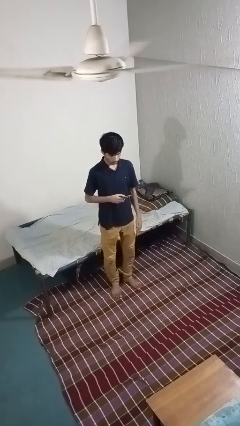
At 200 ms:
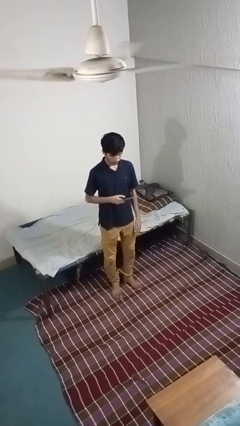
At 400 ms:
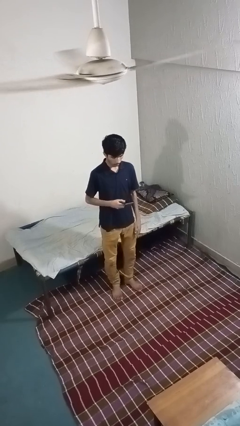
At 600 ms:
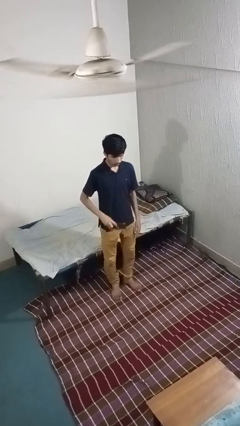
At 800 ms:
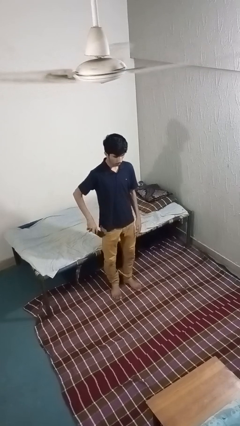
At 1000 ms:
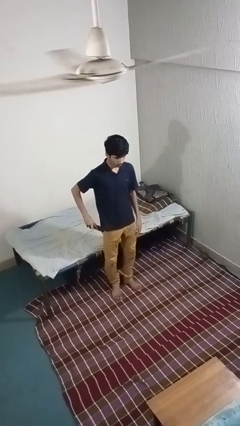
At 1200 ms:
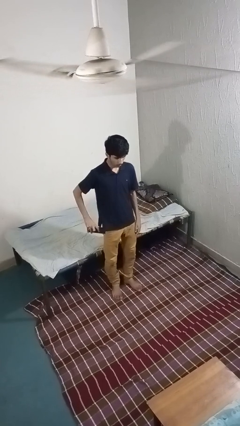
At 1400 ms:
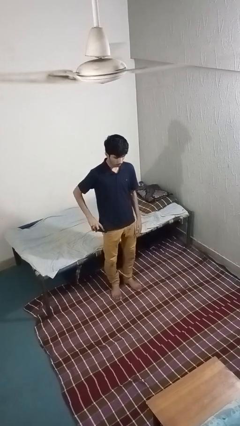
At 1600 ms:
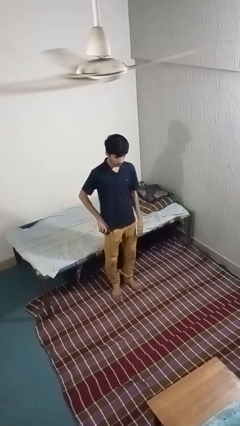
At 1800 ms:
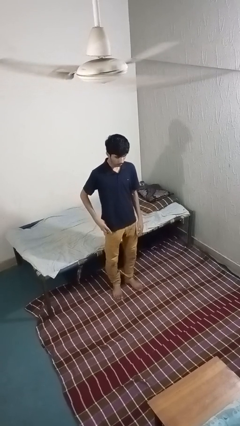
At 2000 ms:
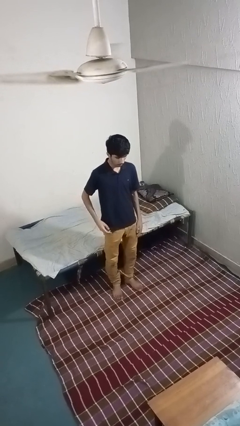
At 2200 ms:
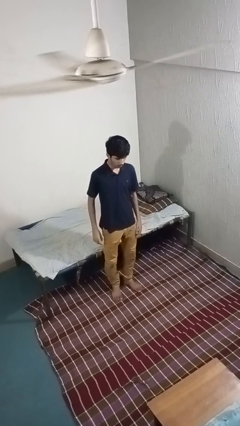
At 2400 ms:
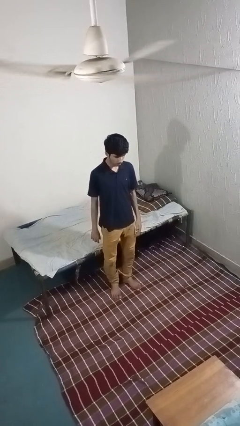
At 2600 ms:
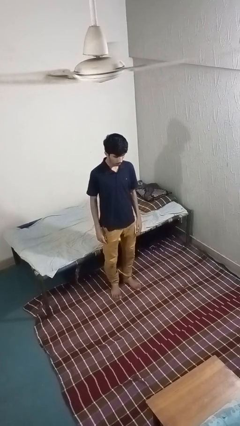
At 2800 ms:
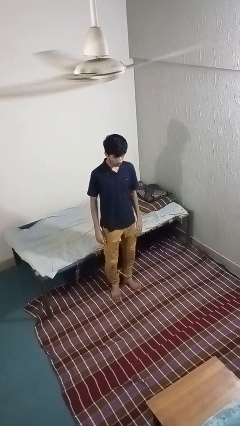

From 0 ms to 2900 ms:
person puts phone into pocket

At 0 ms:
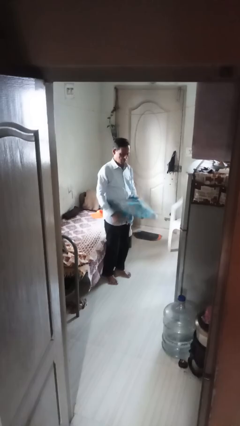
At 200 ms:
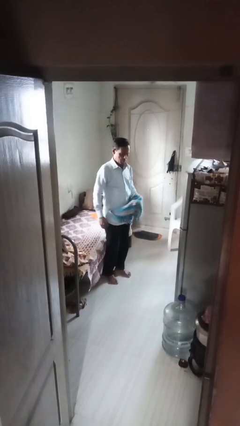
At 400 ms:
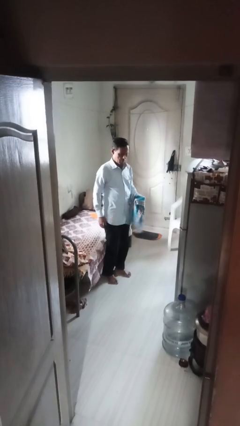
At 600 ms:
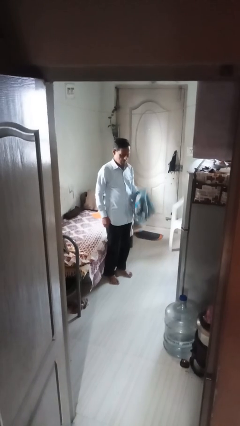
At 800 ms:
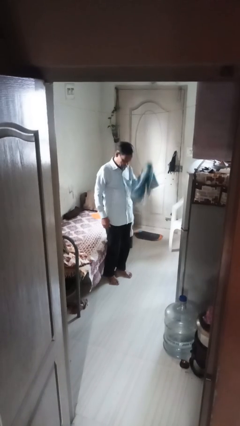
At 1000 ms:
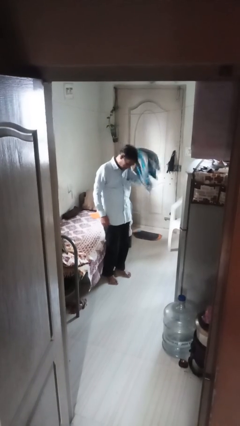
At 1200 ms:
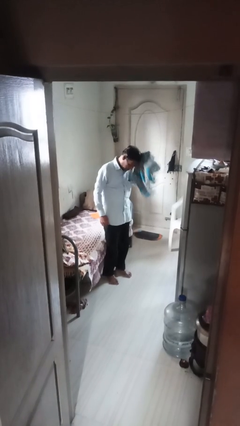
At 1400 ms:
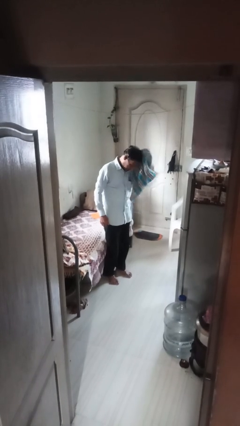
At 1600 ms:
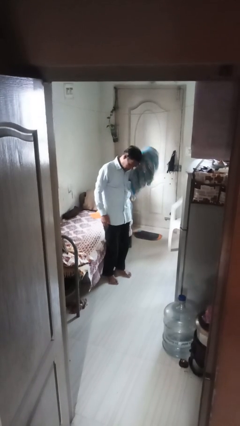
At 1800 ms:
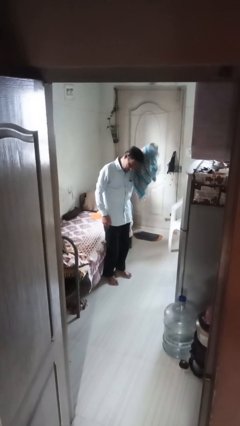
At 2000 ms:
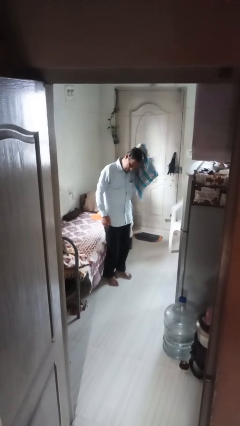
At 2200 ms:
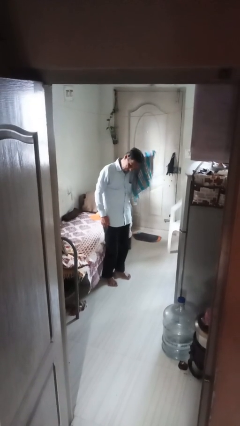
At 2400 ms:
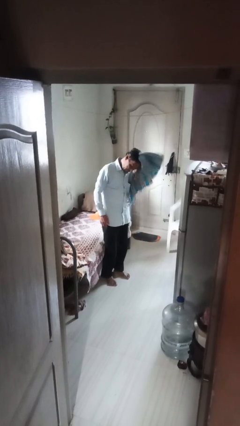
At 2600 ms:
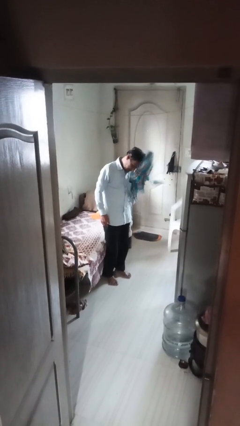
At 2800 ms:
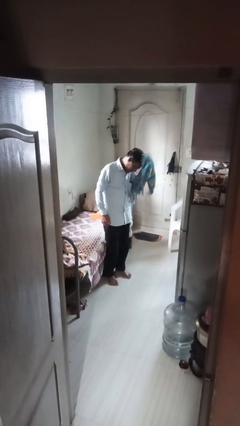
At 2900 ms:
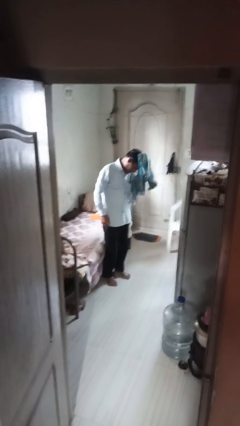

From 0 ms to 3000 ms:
person dries hair with towel

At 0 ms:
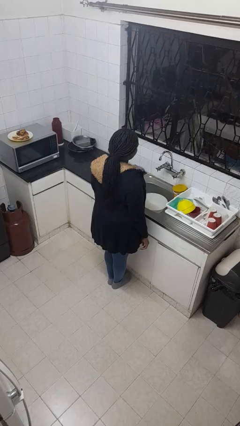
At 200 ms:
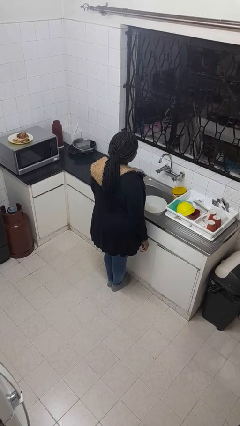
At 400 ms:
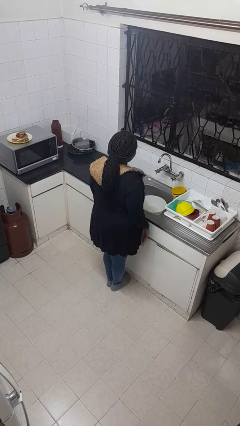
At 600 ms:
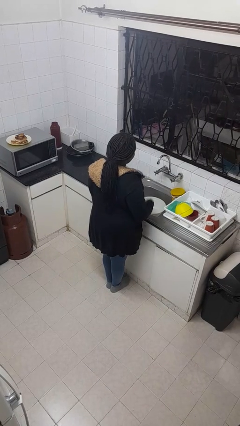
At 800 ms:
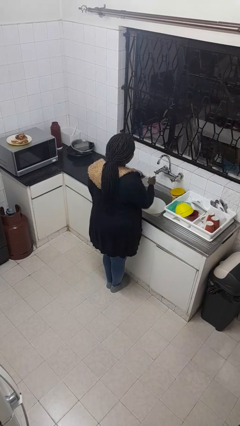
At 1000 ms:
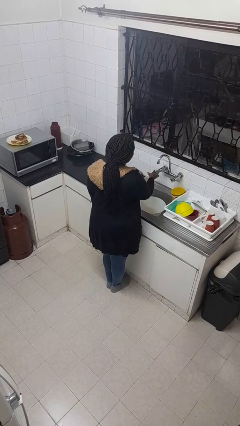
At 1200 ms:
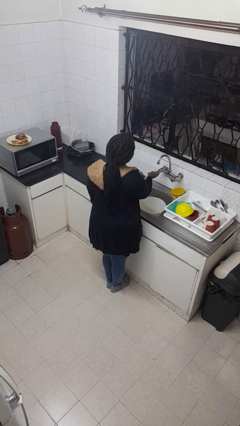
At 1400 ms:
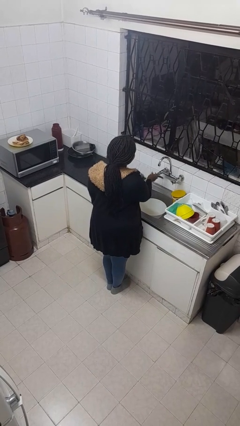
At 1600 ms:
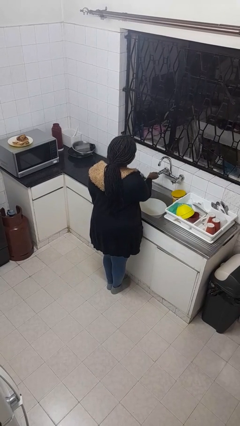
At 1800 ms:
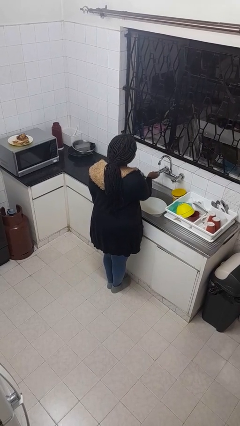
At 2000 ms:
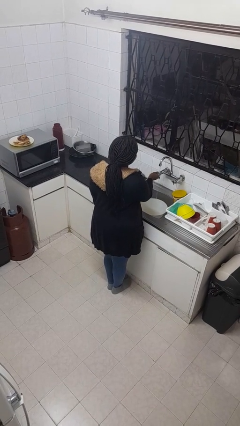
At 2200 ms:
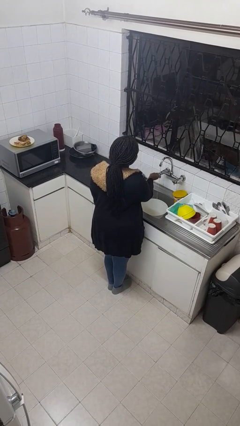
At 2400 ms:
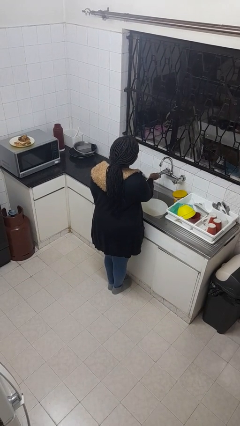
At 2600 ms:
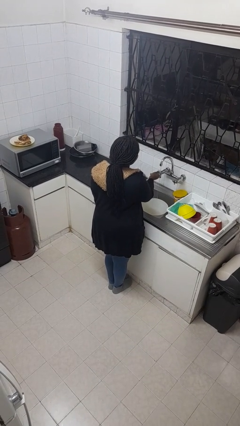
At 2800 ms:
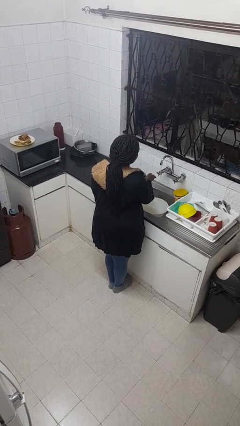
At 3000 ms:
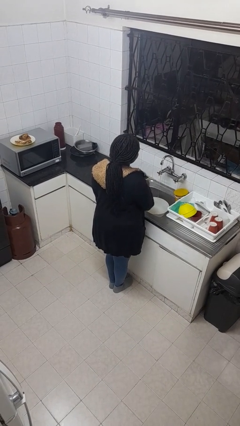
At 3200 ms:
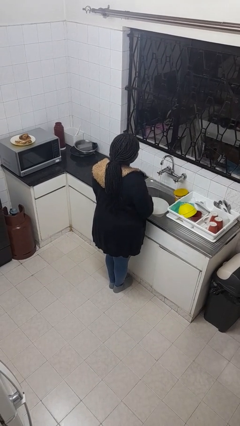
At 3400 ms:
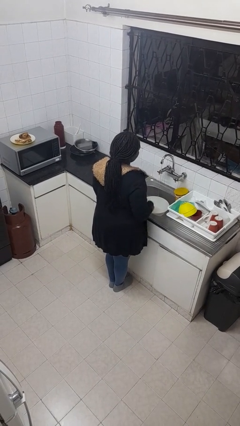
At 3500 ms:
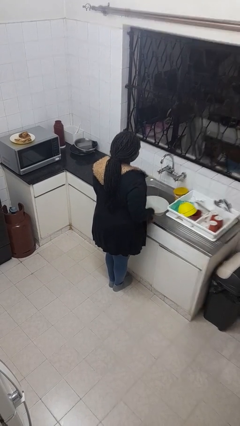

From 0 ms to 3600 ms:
person turns on faucet

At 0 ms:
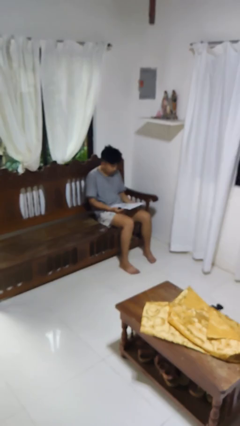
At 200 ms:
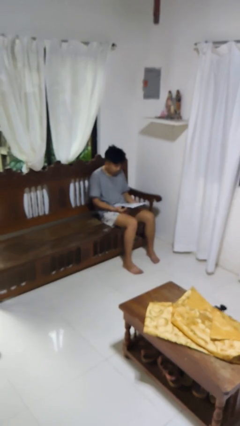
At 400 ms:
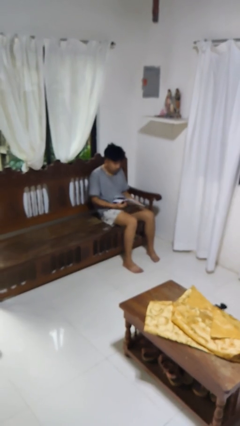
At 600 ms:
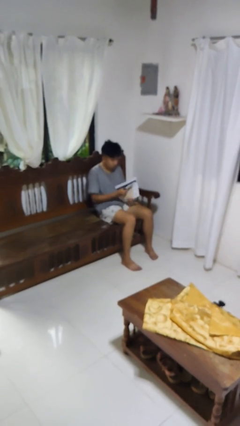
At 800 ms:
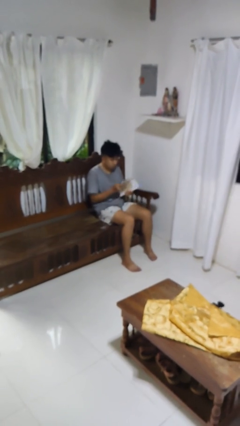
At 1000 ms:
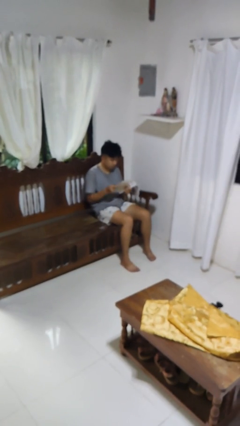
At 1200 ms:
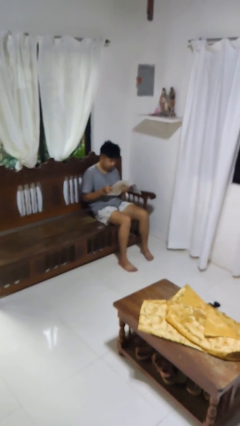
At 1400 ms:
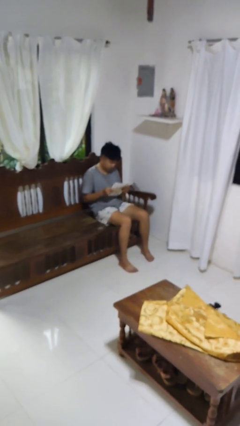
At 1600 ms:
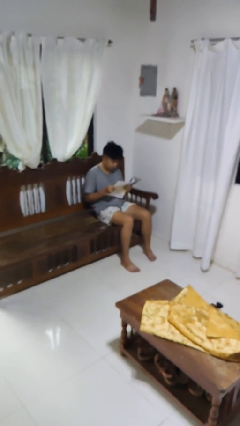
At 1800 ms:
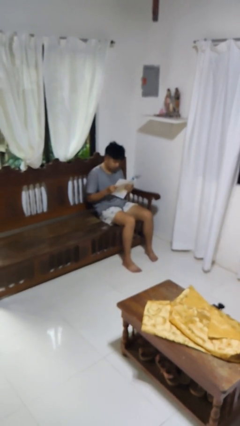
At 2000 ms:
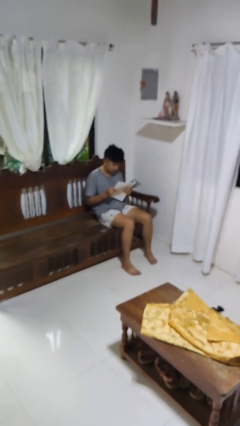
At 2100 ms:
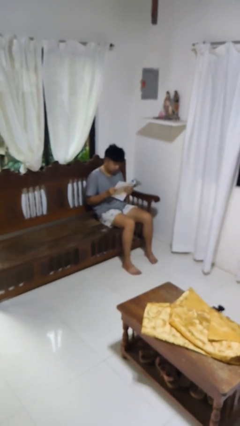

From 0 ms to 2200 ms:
person reads newspaper

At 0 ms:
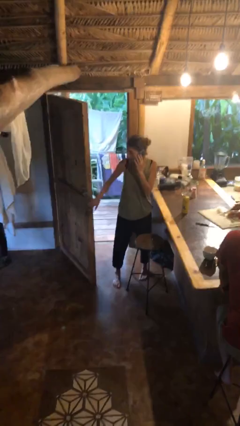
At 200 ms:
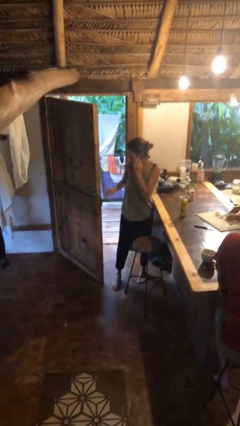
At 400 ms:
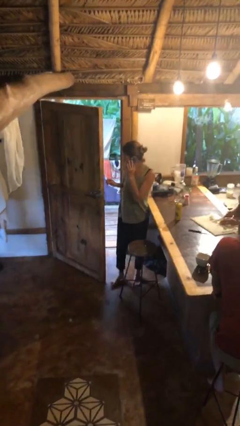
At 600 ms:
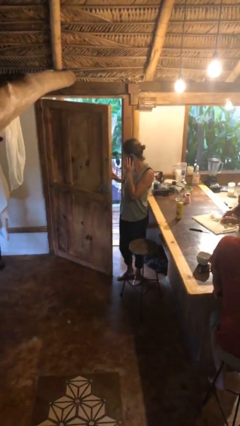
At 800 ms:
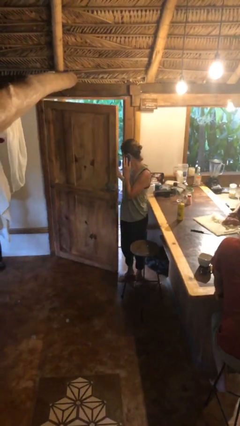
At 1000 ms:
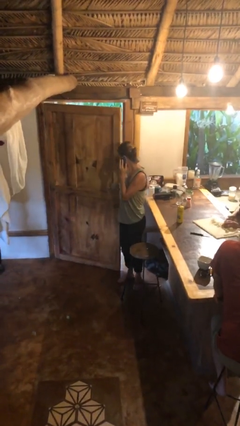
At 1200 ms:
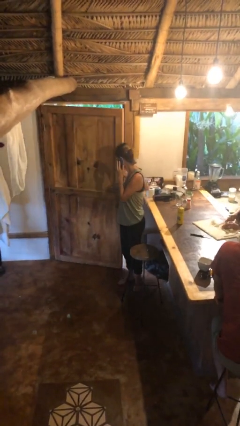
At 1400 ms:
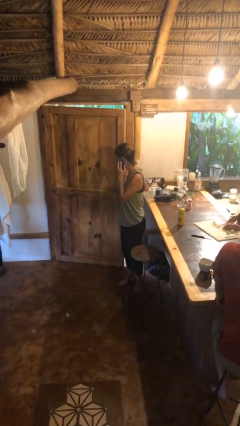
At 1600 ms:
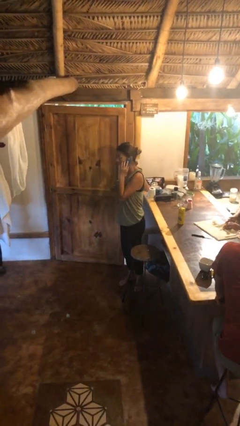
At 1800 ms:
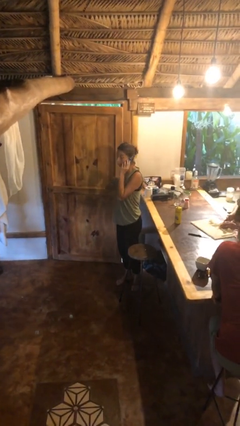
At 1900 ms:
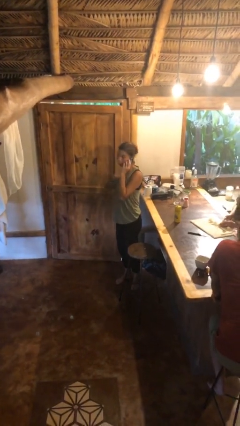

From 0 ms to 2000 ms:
person closes facility door

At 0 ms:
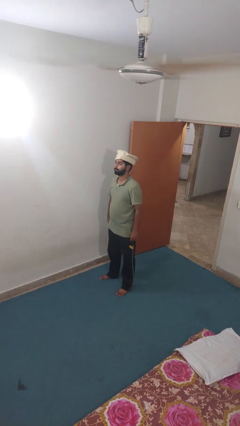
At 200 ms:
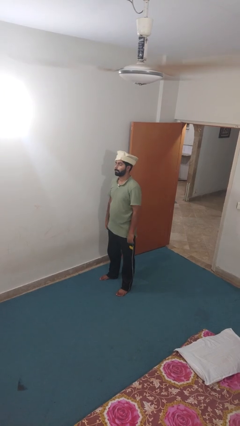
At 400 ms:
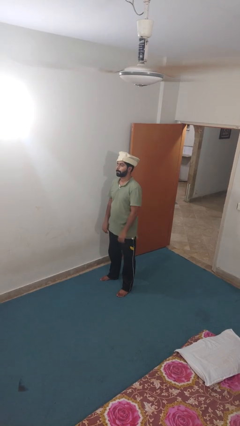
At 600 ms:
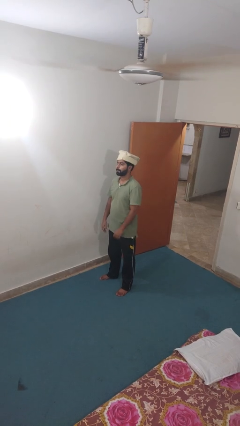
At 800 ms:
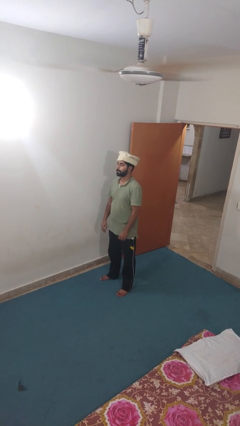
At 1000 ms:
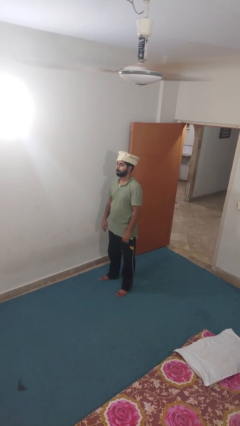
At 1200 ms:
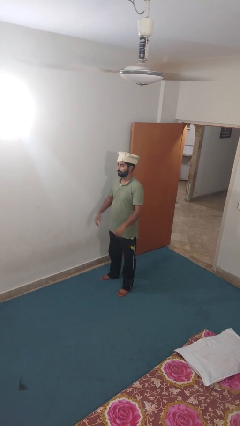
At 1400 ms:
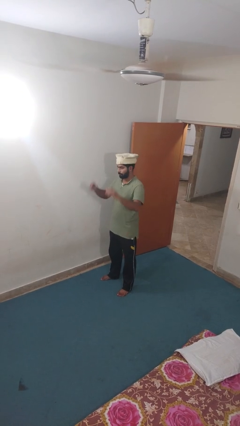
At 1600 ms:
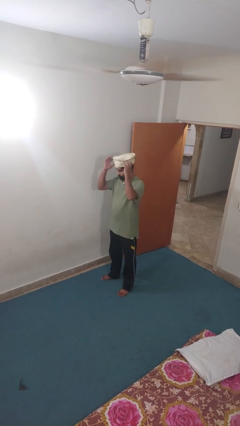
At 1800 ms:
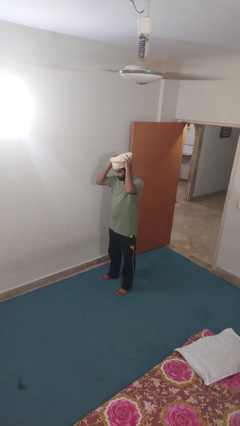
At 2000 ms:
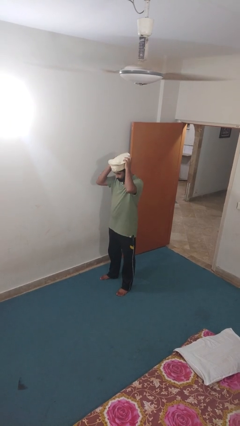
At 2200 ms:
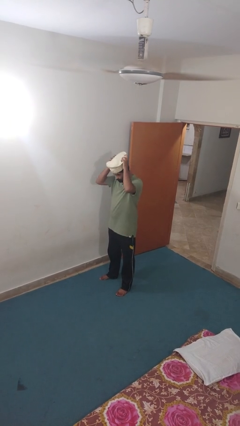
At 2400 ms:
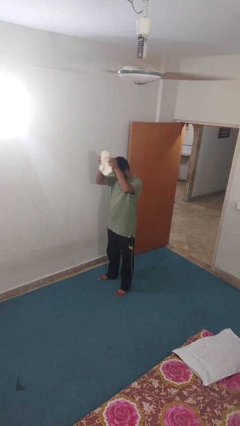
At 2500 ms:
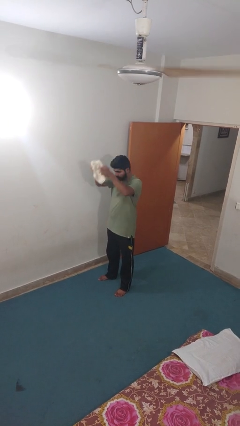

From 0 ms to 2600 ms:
person takes off hat

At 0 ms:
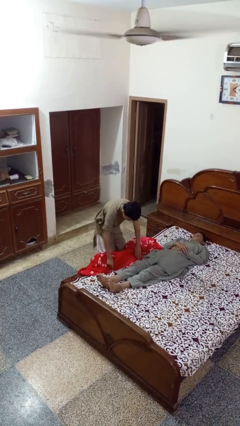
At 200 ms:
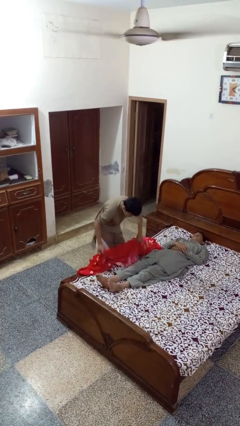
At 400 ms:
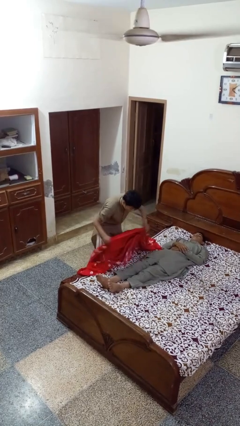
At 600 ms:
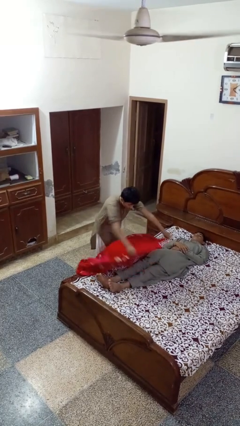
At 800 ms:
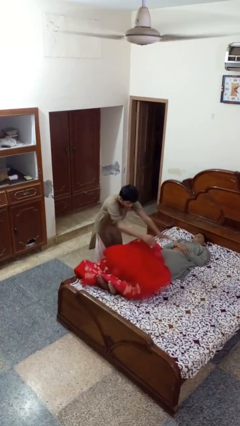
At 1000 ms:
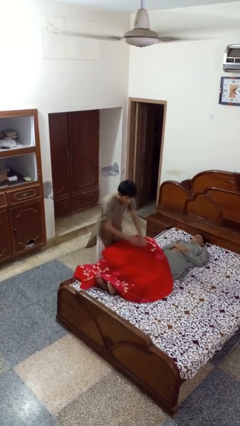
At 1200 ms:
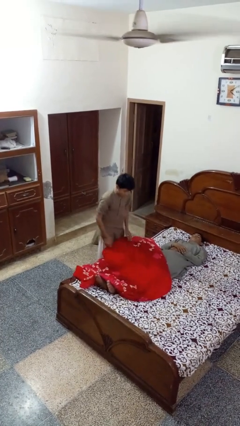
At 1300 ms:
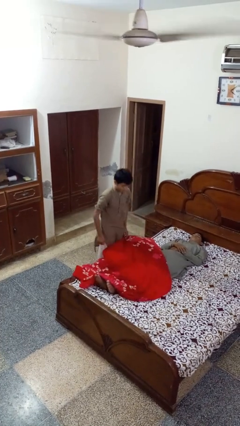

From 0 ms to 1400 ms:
person covers friend with blanket
